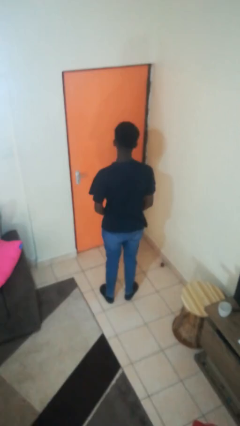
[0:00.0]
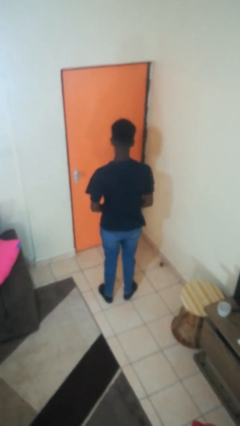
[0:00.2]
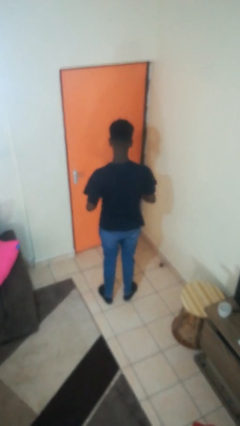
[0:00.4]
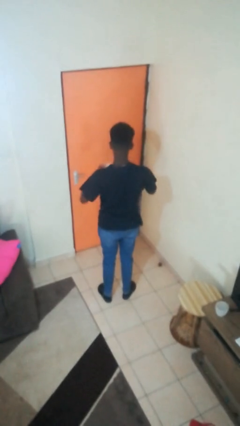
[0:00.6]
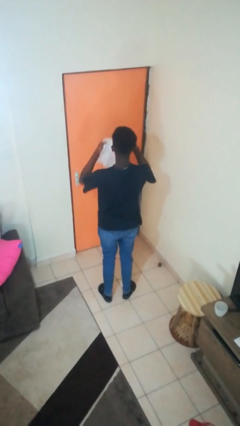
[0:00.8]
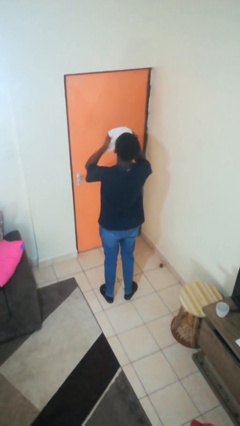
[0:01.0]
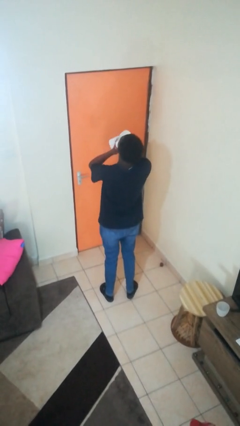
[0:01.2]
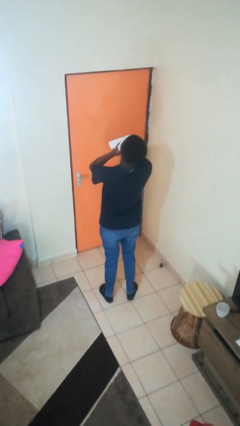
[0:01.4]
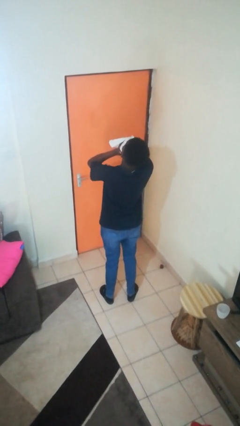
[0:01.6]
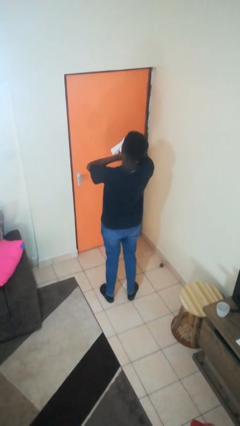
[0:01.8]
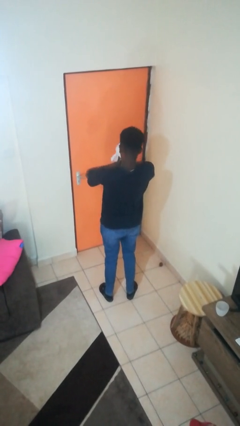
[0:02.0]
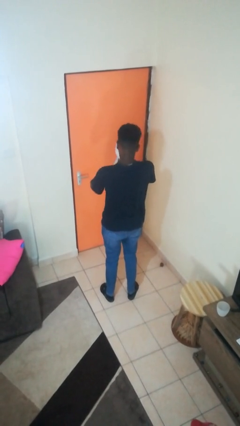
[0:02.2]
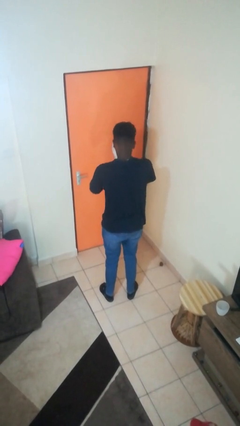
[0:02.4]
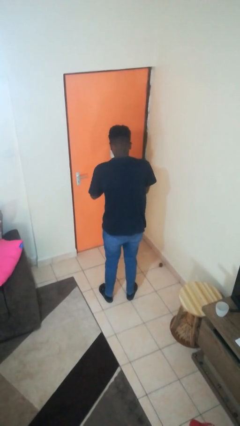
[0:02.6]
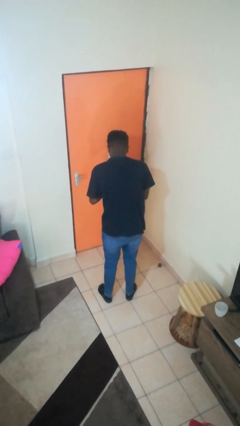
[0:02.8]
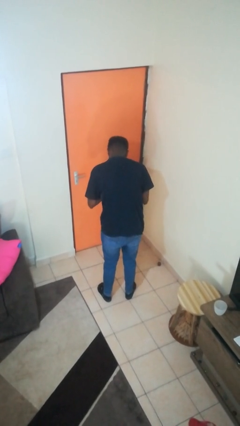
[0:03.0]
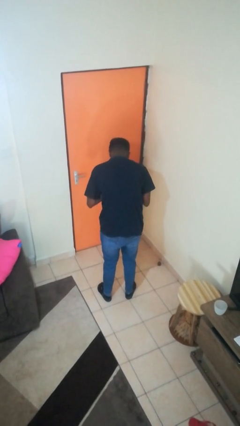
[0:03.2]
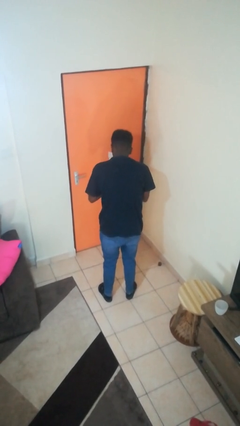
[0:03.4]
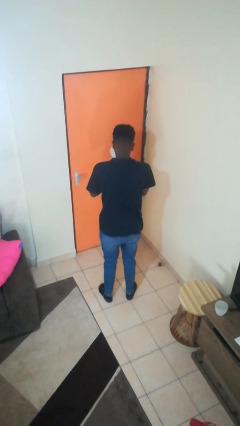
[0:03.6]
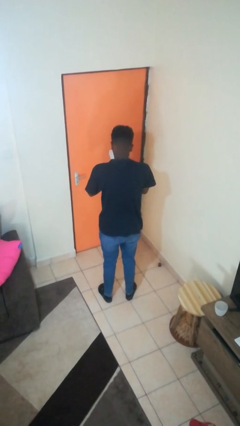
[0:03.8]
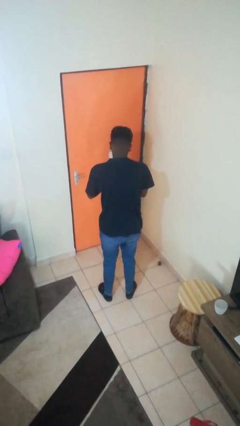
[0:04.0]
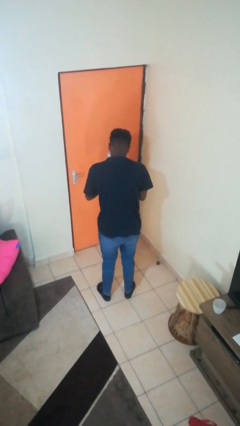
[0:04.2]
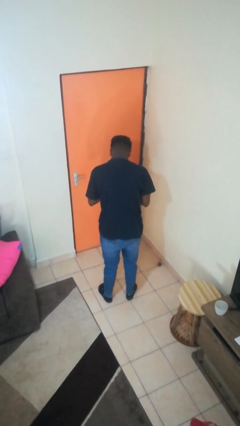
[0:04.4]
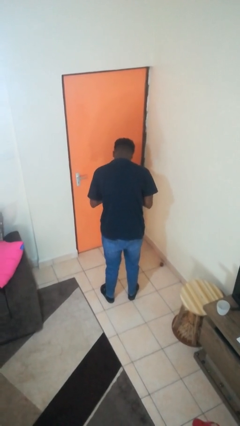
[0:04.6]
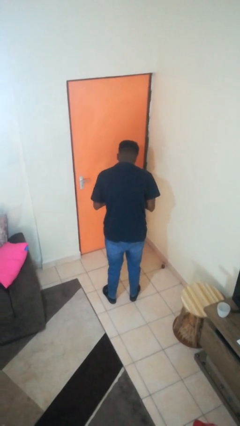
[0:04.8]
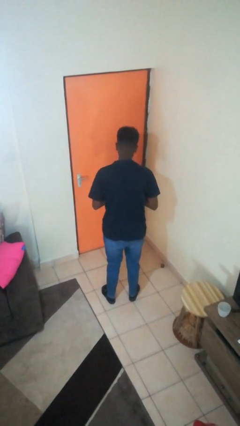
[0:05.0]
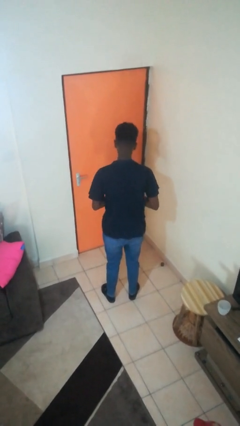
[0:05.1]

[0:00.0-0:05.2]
person blows nose

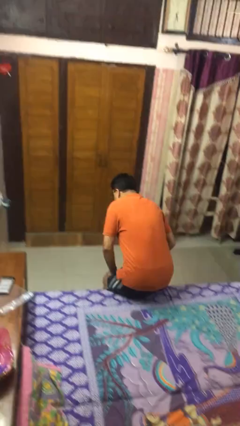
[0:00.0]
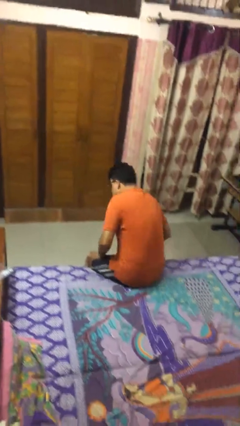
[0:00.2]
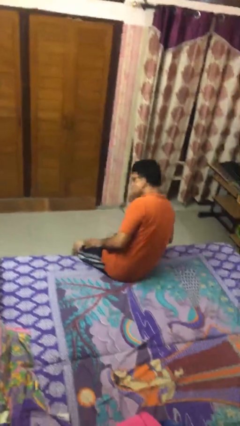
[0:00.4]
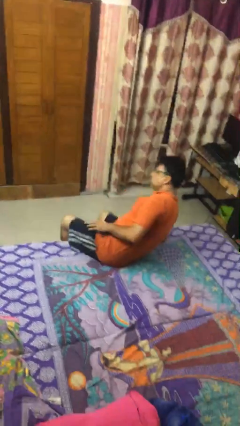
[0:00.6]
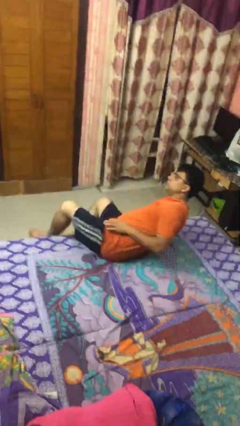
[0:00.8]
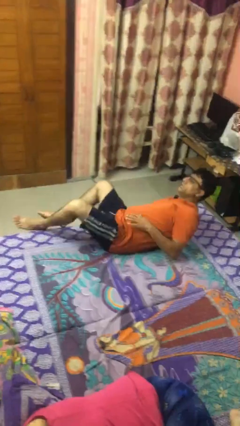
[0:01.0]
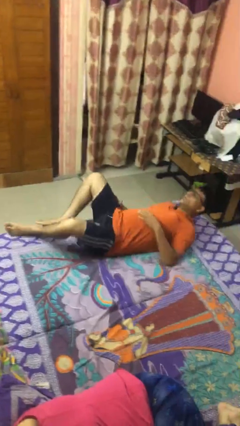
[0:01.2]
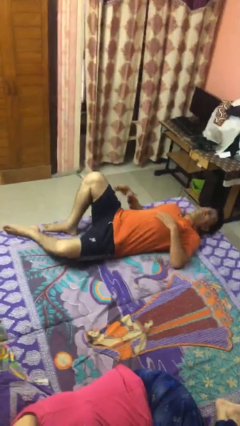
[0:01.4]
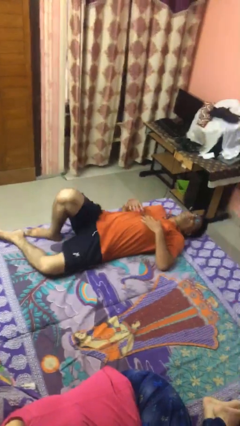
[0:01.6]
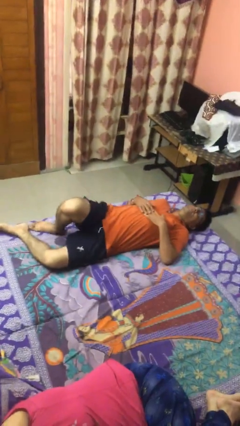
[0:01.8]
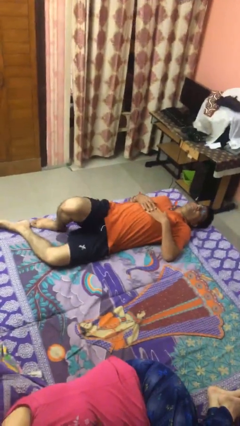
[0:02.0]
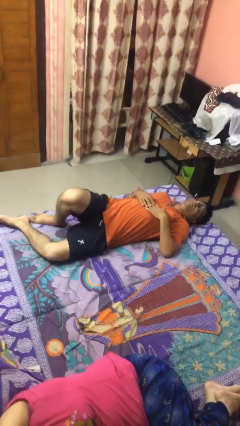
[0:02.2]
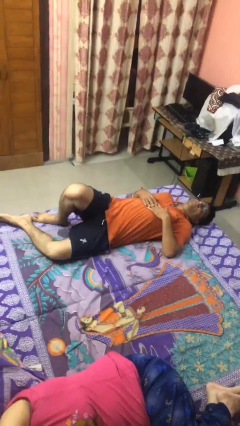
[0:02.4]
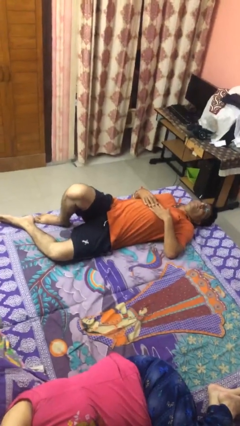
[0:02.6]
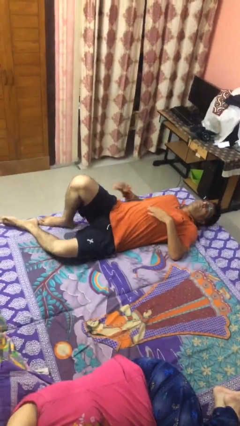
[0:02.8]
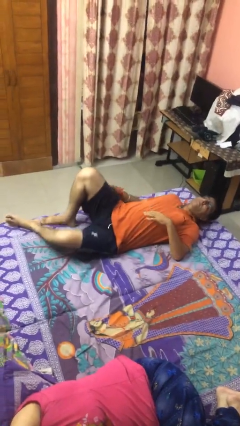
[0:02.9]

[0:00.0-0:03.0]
person lies down on bed

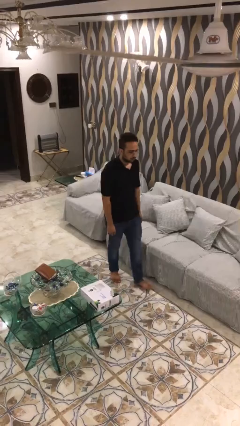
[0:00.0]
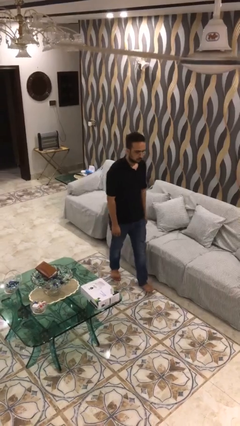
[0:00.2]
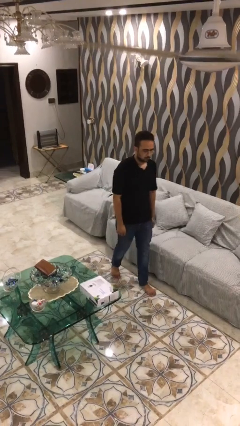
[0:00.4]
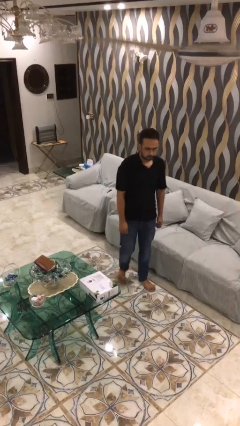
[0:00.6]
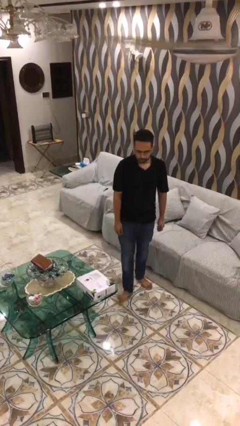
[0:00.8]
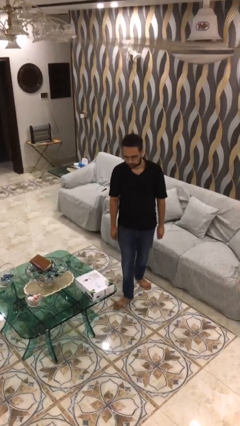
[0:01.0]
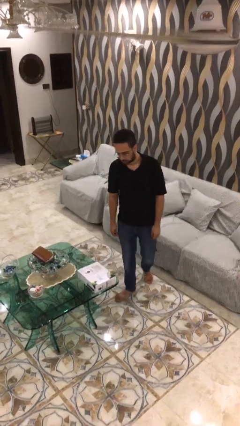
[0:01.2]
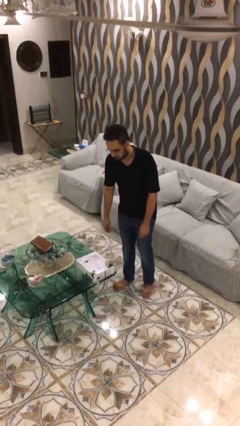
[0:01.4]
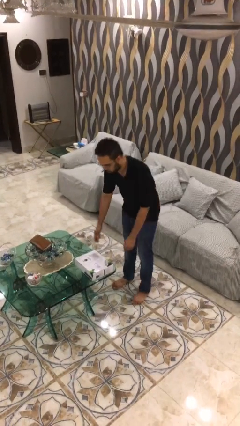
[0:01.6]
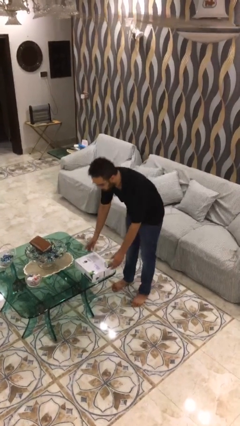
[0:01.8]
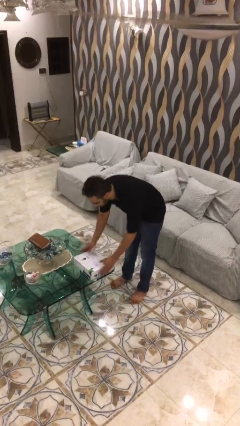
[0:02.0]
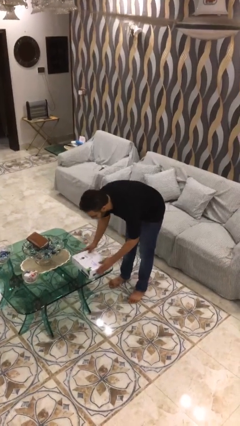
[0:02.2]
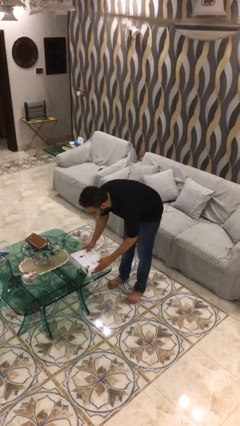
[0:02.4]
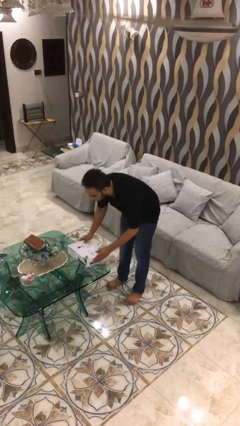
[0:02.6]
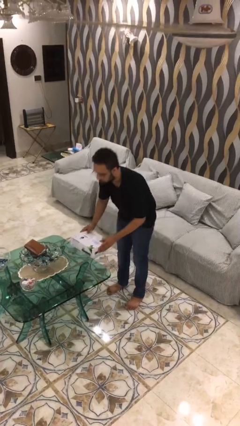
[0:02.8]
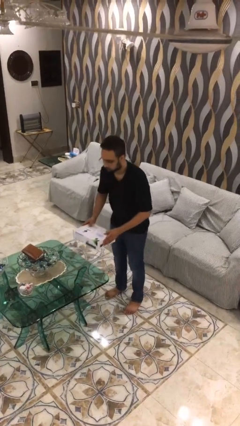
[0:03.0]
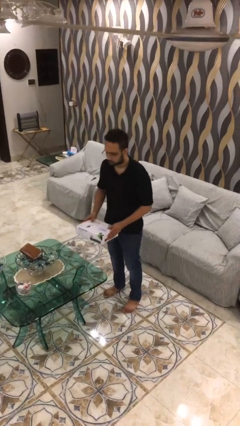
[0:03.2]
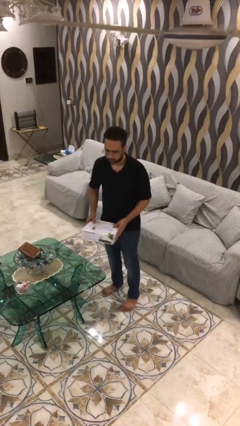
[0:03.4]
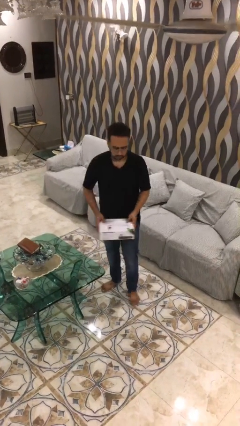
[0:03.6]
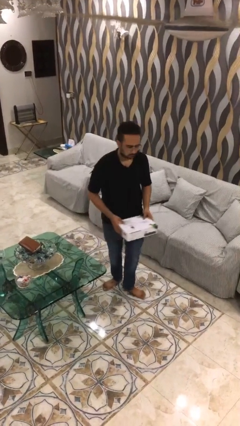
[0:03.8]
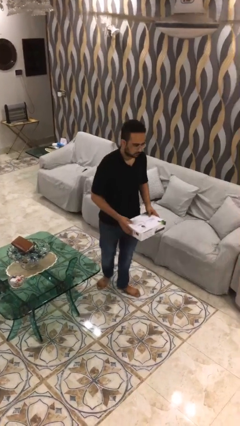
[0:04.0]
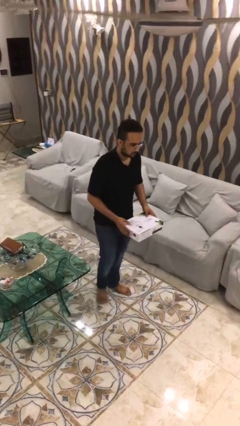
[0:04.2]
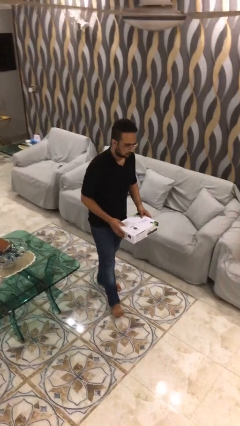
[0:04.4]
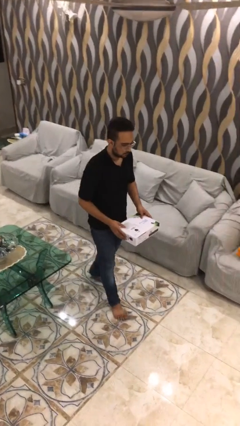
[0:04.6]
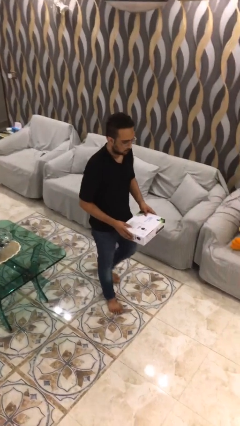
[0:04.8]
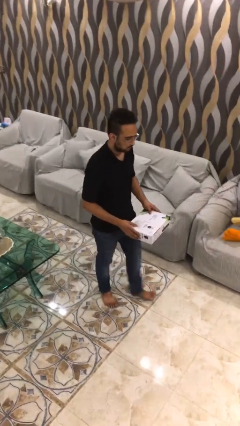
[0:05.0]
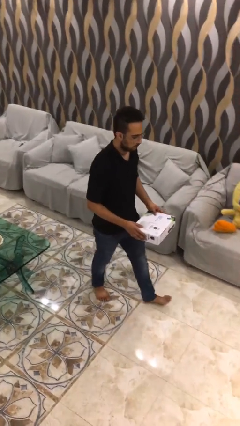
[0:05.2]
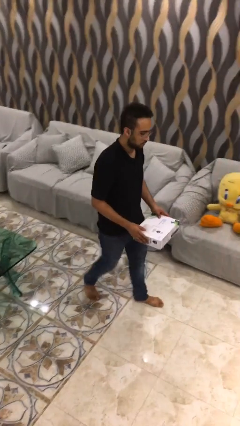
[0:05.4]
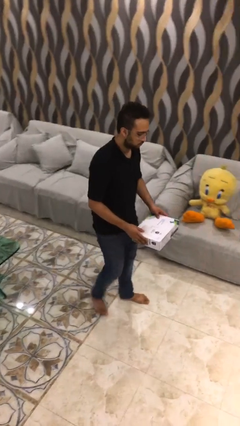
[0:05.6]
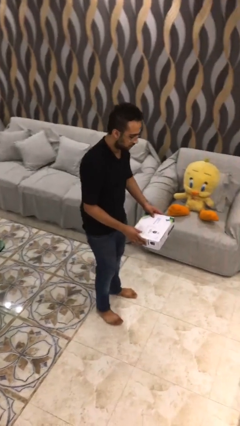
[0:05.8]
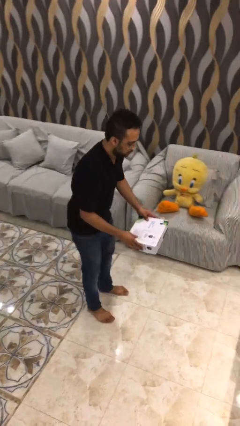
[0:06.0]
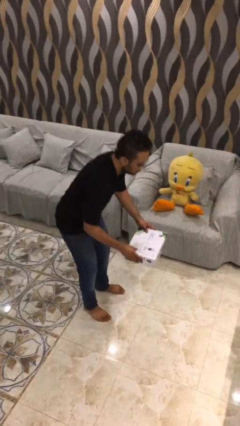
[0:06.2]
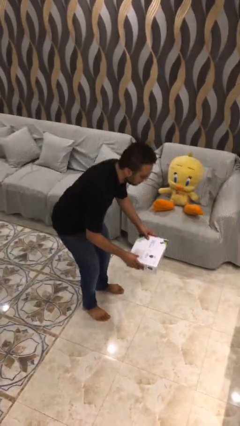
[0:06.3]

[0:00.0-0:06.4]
person picks up object from table

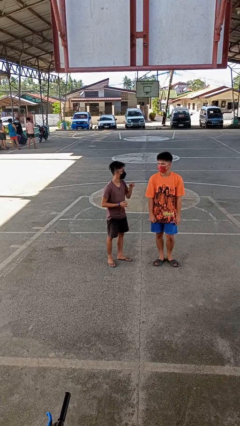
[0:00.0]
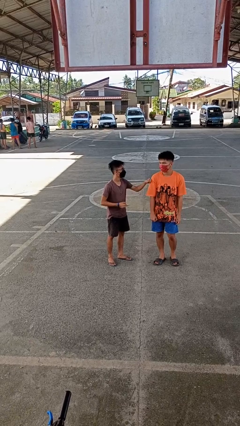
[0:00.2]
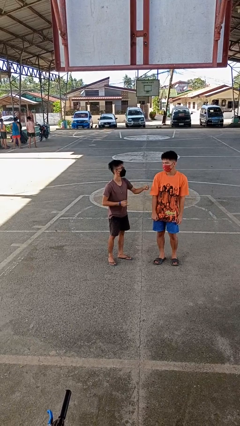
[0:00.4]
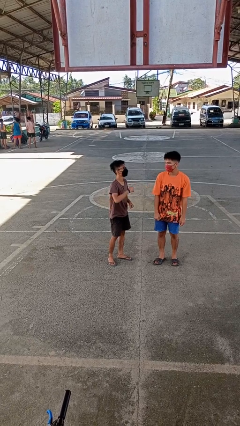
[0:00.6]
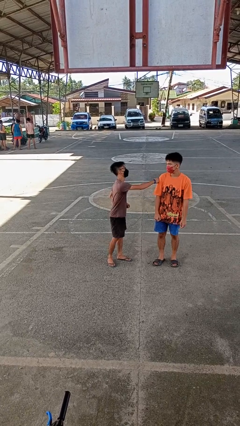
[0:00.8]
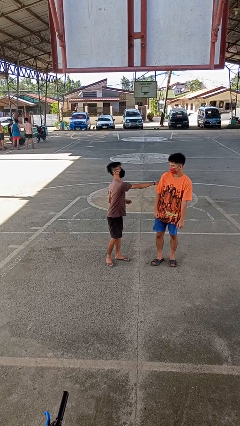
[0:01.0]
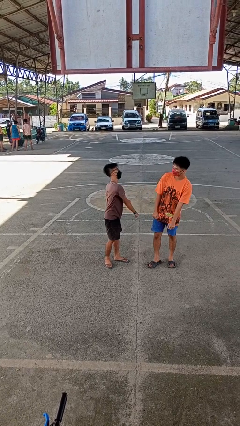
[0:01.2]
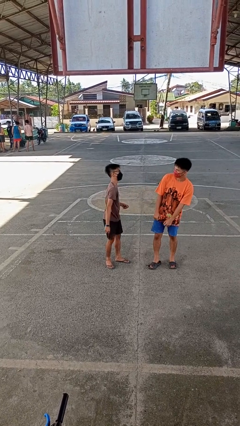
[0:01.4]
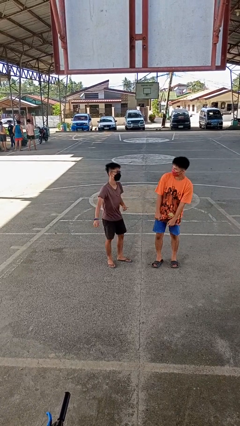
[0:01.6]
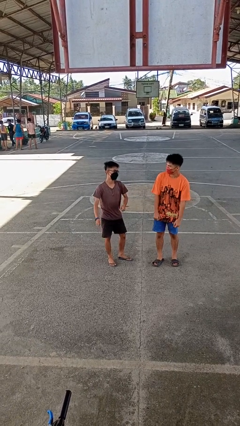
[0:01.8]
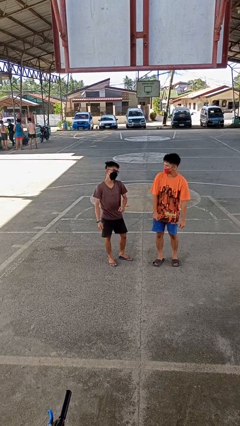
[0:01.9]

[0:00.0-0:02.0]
person pounds shoulders of person

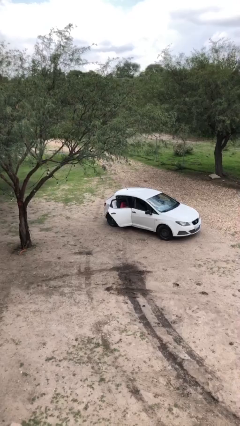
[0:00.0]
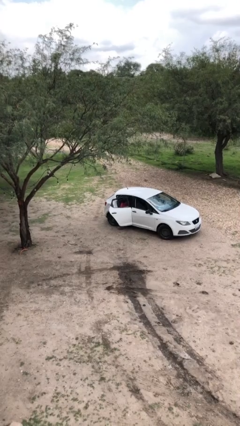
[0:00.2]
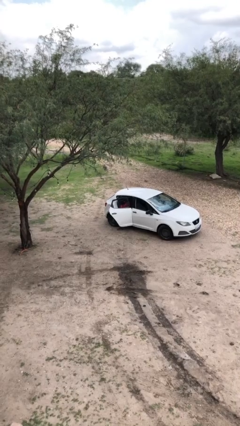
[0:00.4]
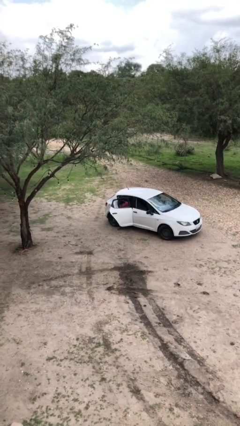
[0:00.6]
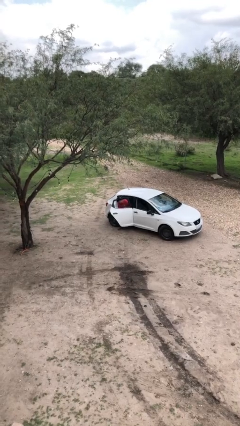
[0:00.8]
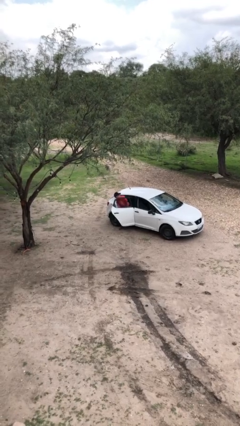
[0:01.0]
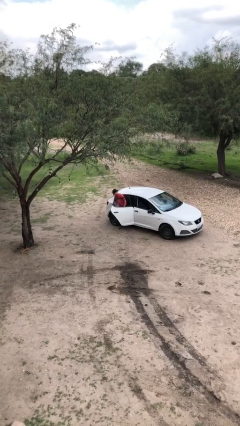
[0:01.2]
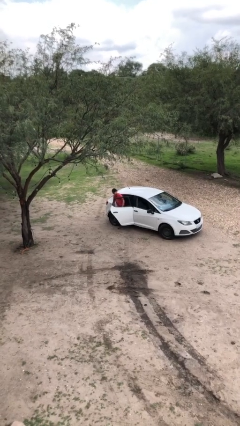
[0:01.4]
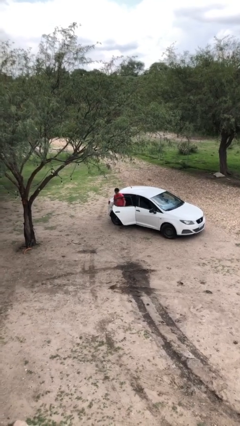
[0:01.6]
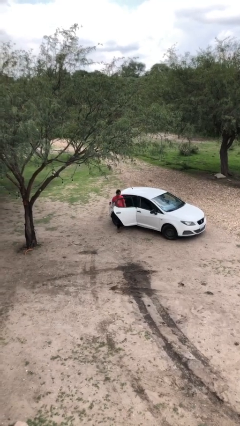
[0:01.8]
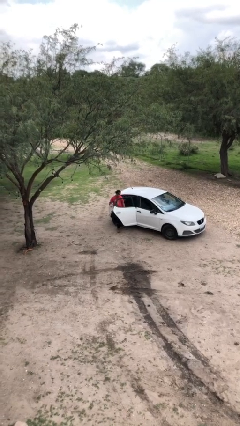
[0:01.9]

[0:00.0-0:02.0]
person exits car
